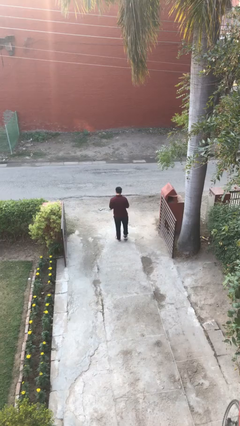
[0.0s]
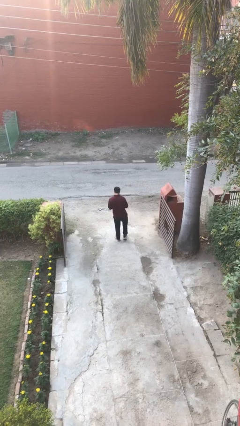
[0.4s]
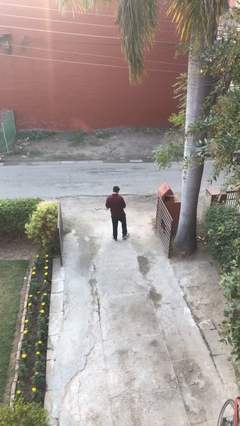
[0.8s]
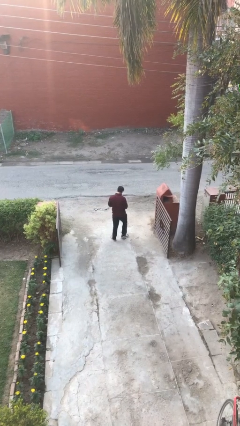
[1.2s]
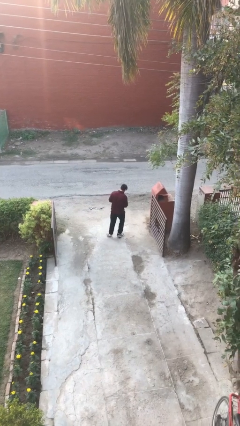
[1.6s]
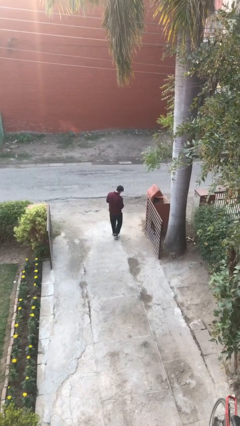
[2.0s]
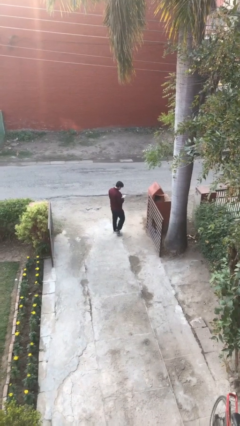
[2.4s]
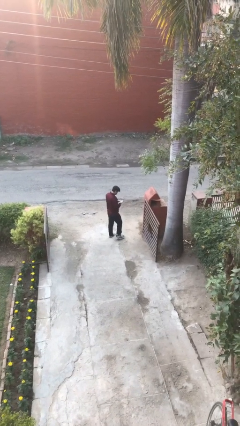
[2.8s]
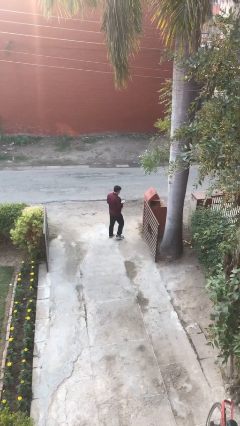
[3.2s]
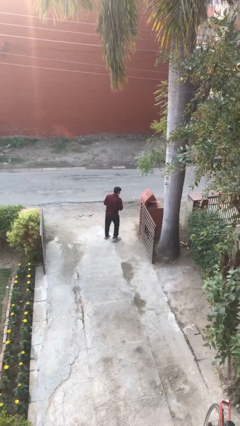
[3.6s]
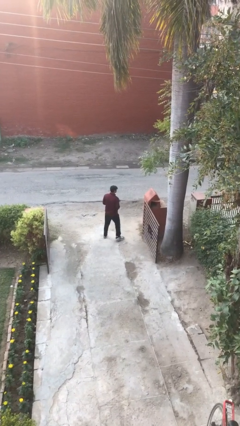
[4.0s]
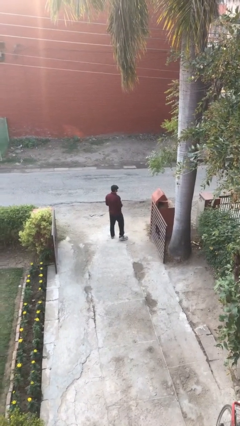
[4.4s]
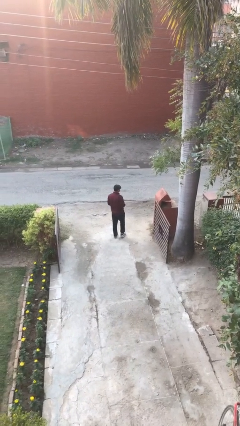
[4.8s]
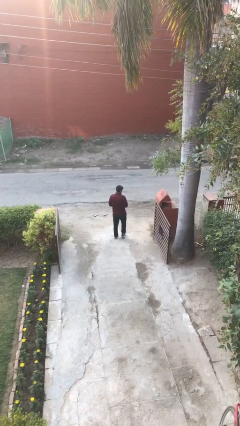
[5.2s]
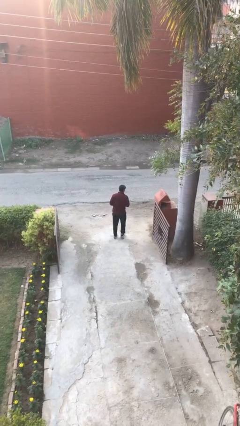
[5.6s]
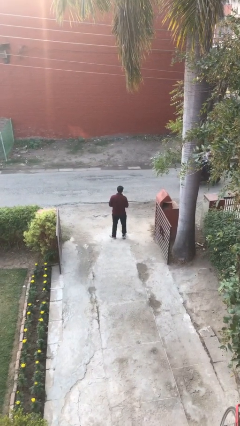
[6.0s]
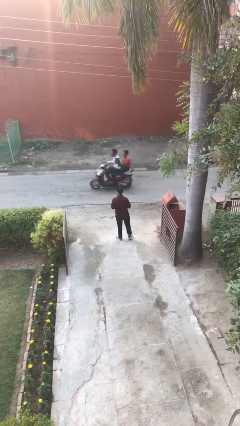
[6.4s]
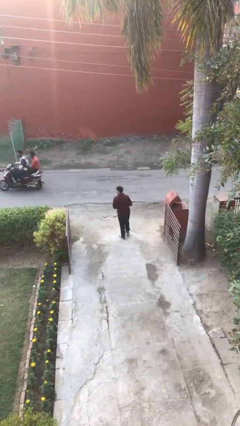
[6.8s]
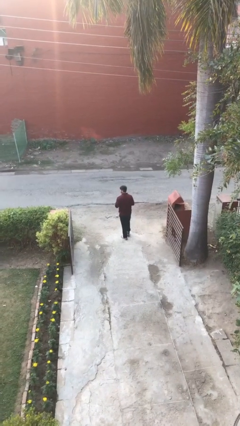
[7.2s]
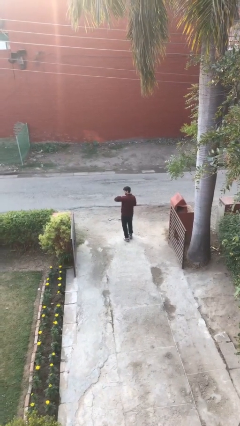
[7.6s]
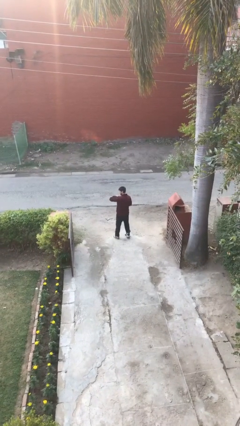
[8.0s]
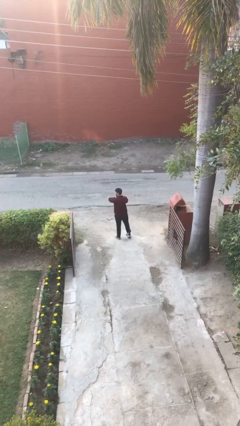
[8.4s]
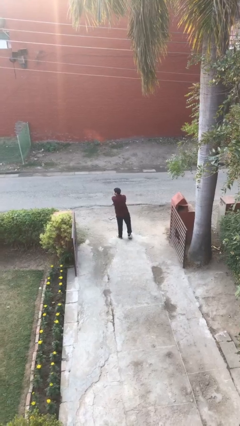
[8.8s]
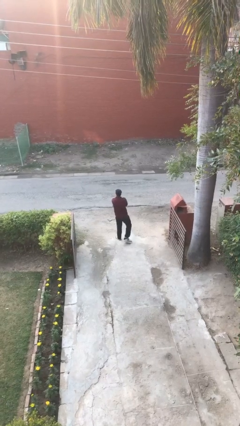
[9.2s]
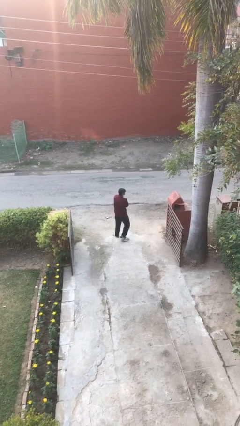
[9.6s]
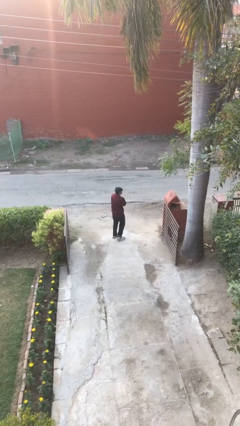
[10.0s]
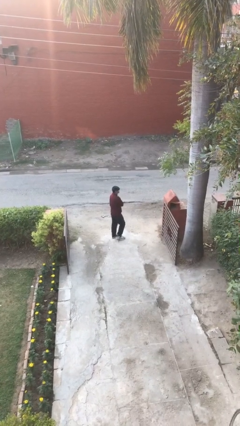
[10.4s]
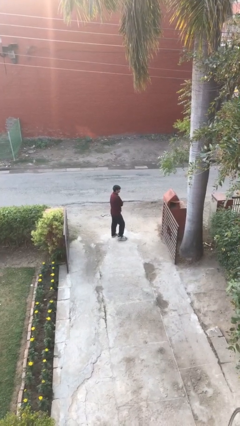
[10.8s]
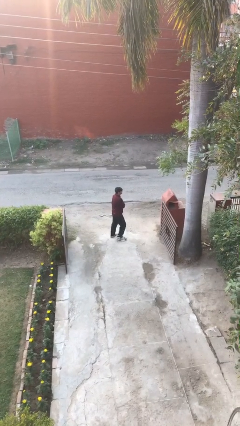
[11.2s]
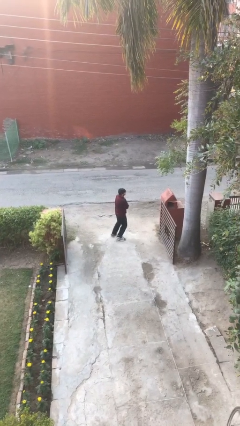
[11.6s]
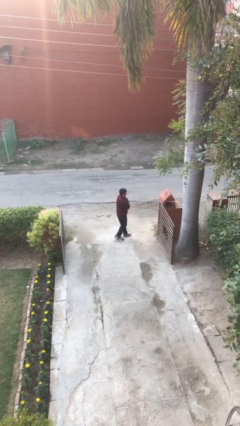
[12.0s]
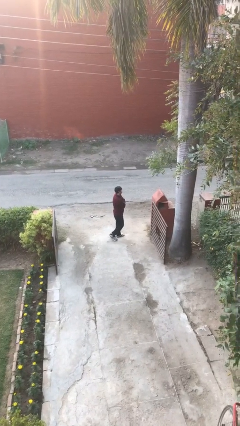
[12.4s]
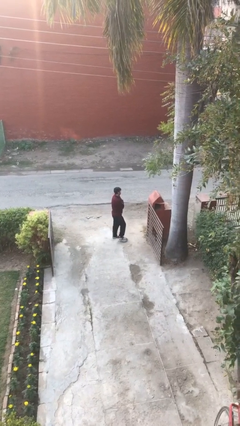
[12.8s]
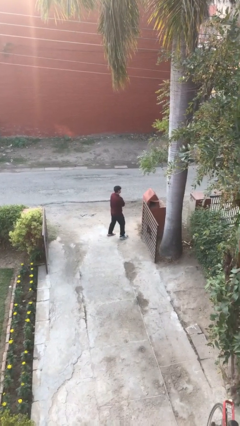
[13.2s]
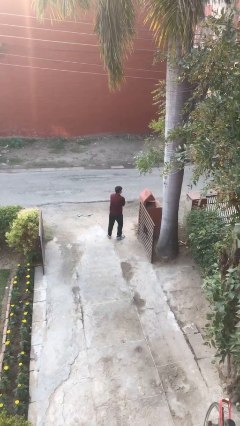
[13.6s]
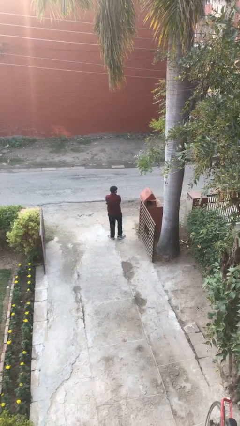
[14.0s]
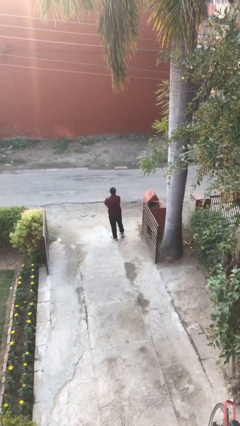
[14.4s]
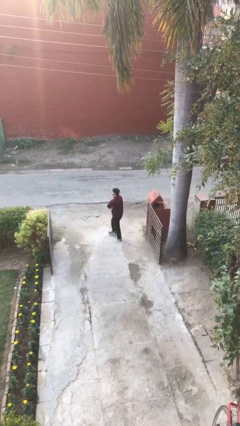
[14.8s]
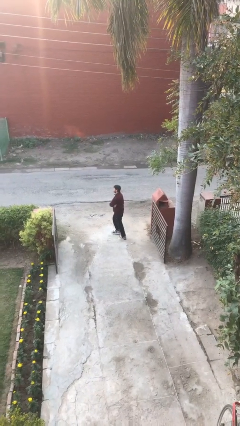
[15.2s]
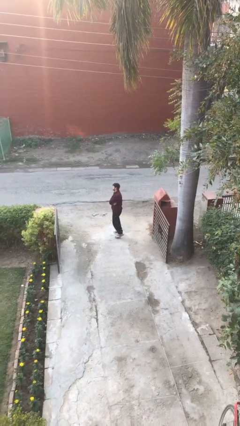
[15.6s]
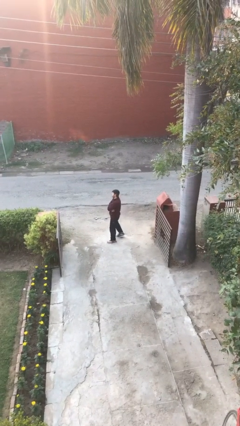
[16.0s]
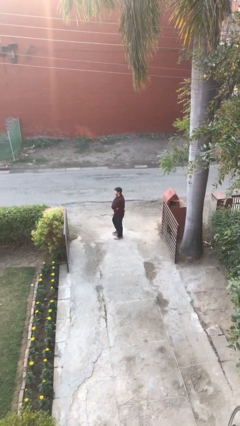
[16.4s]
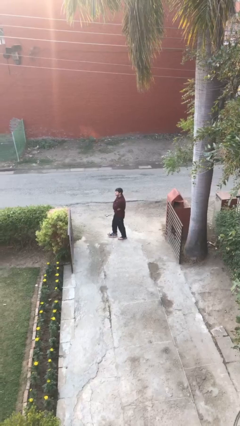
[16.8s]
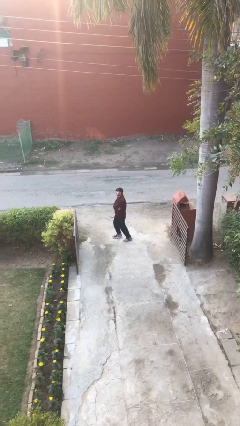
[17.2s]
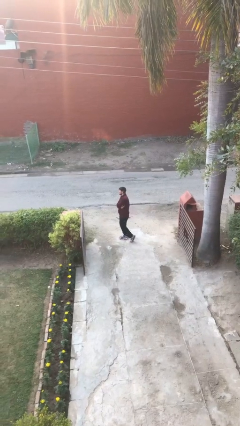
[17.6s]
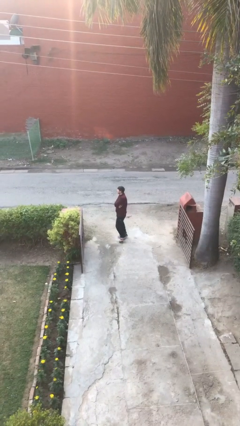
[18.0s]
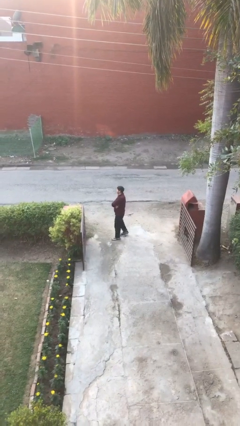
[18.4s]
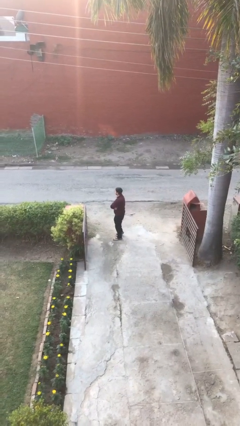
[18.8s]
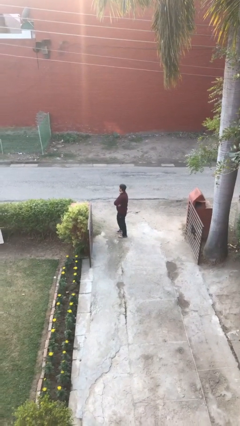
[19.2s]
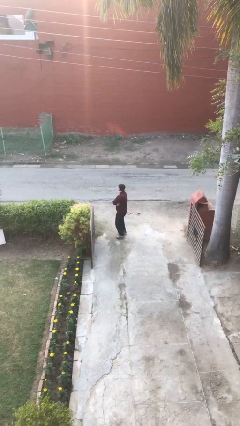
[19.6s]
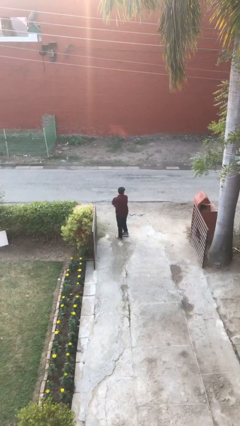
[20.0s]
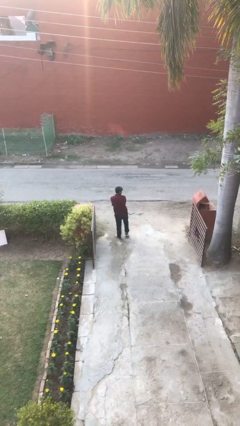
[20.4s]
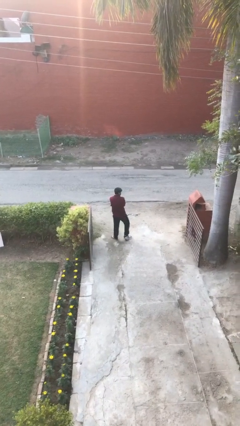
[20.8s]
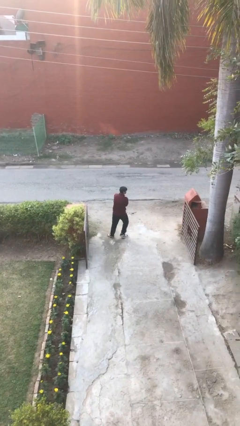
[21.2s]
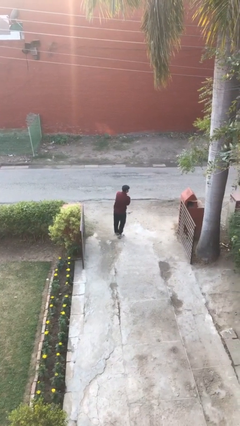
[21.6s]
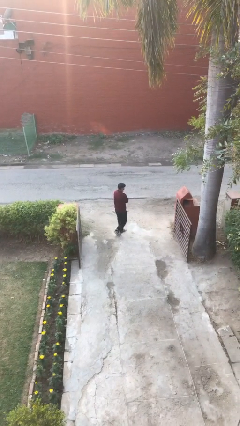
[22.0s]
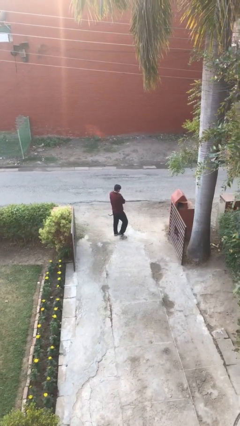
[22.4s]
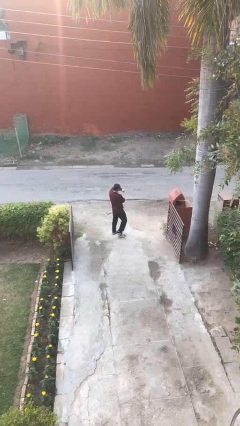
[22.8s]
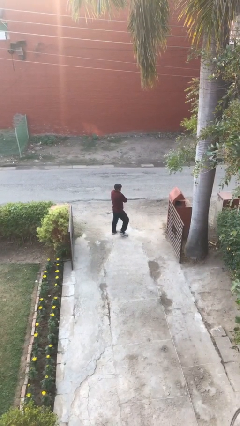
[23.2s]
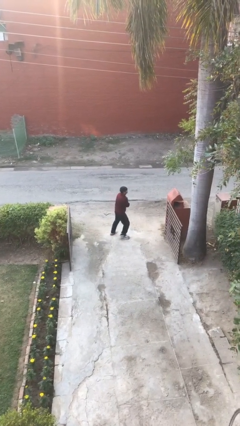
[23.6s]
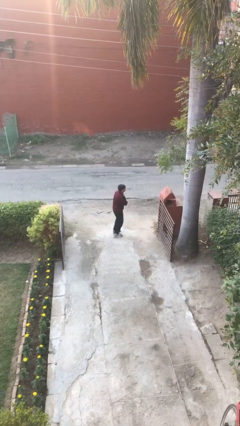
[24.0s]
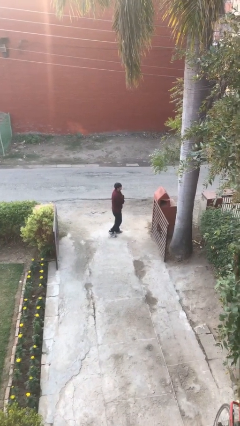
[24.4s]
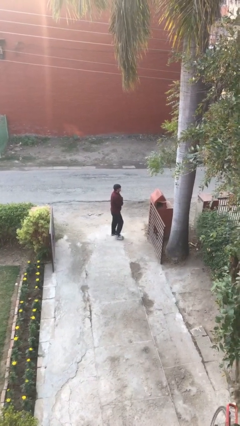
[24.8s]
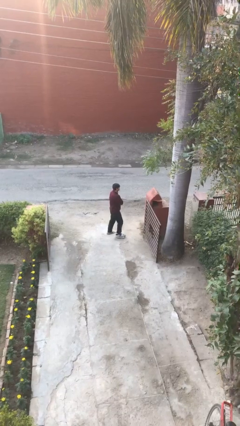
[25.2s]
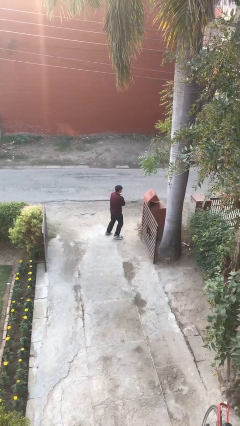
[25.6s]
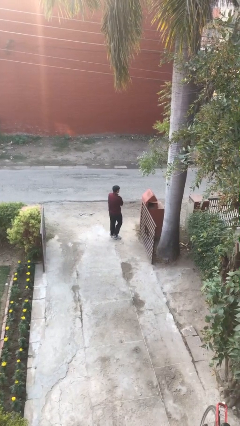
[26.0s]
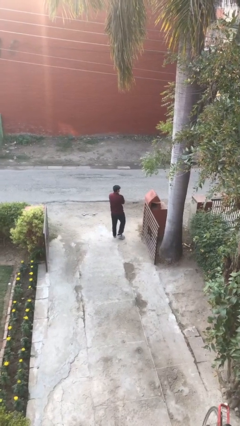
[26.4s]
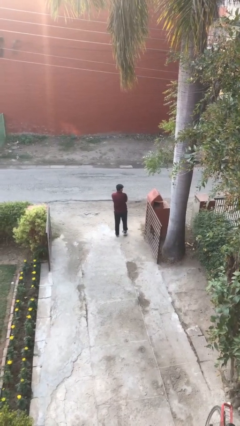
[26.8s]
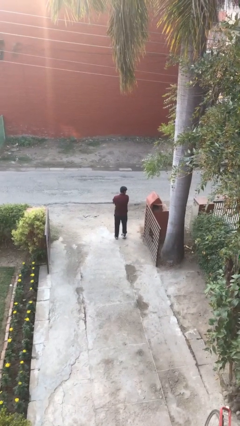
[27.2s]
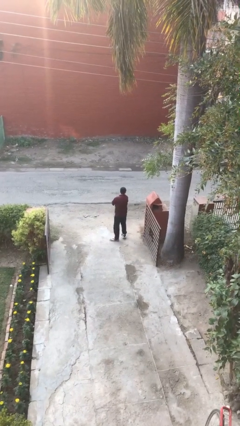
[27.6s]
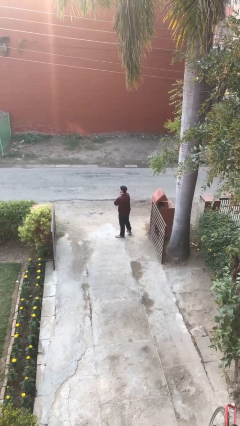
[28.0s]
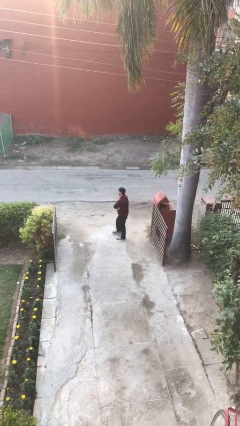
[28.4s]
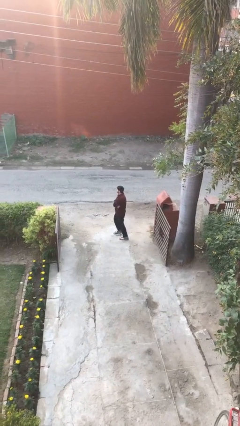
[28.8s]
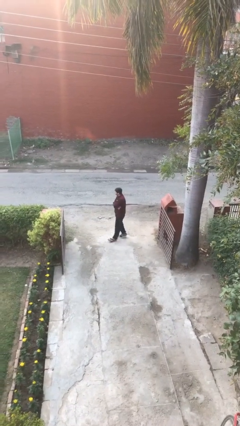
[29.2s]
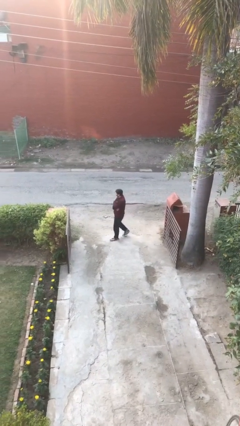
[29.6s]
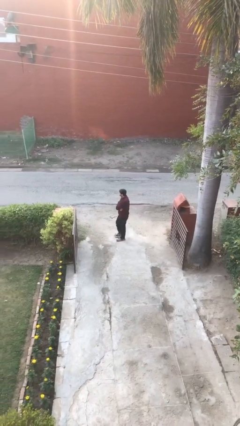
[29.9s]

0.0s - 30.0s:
person walks

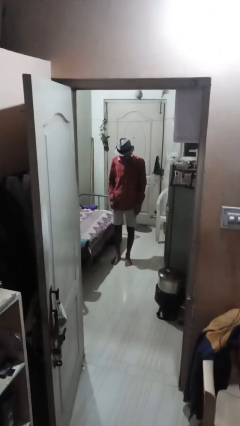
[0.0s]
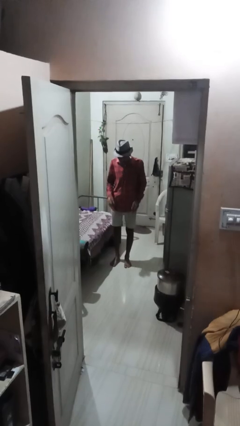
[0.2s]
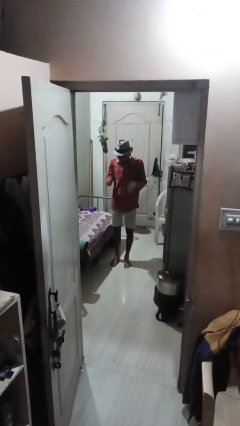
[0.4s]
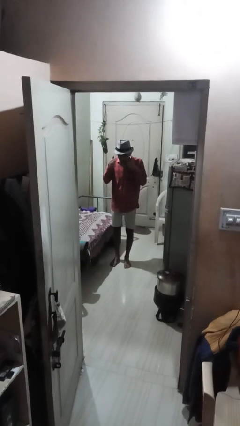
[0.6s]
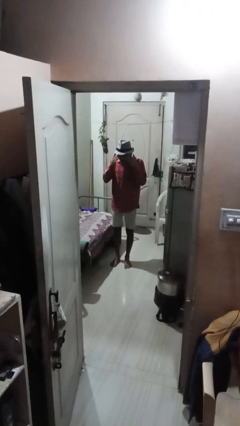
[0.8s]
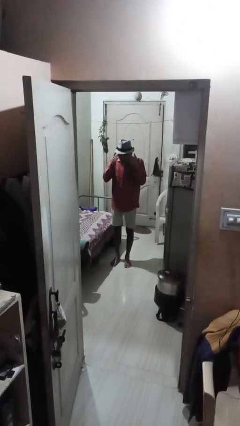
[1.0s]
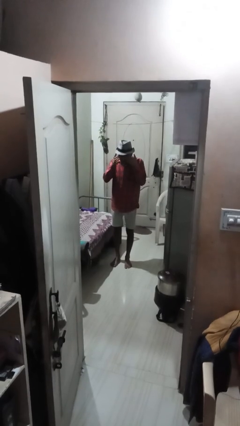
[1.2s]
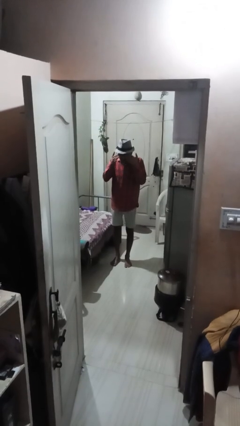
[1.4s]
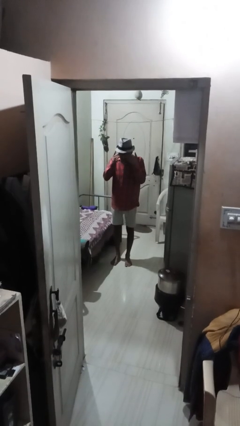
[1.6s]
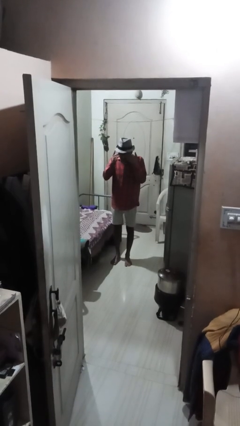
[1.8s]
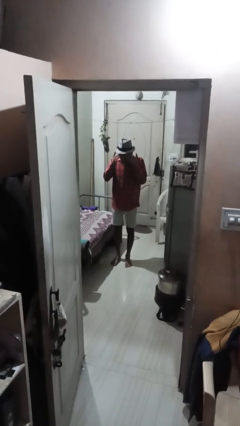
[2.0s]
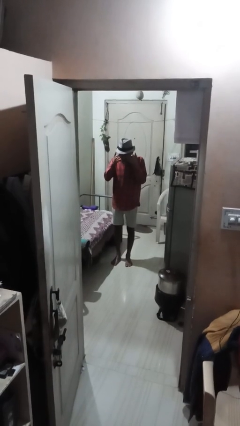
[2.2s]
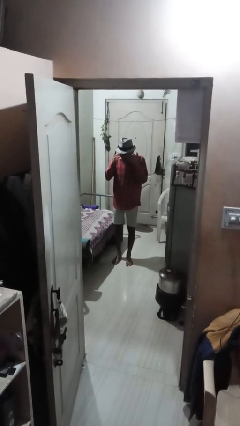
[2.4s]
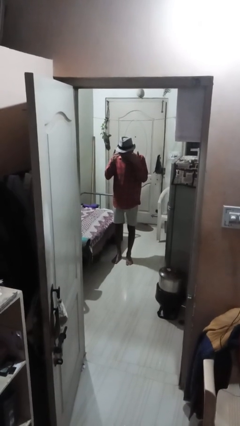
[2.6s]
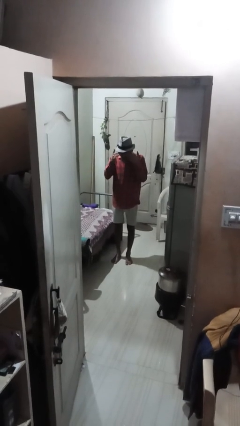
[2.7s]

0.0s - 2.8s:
person rubs eyes

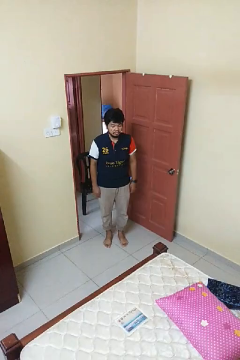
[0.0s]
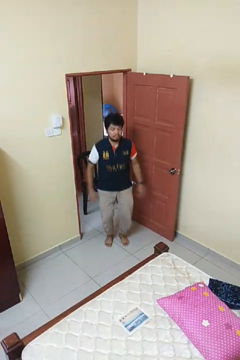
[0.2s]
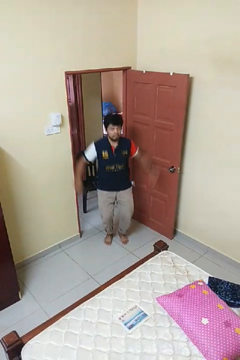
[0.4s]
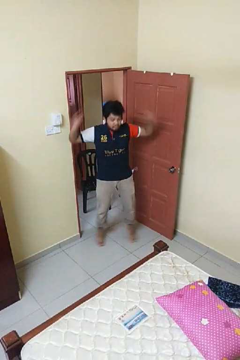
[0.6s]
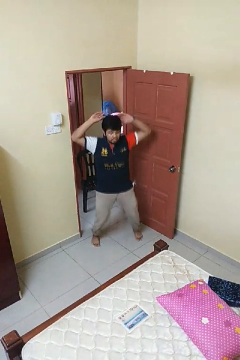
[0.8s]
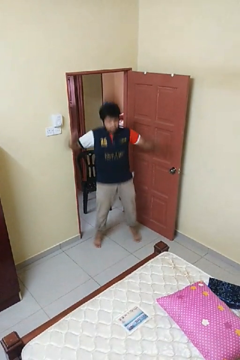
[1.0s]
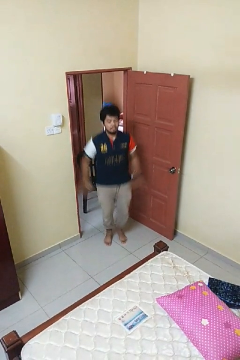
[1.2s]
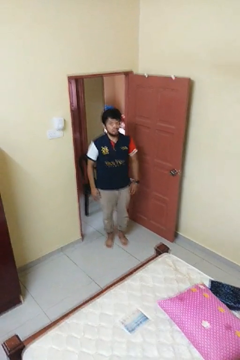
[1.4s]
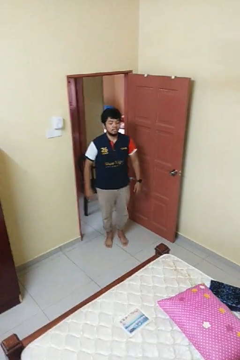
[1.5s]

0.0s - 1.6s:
person exercises with jumping jacks
